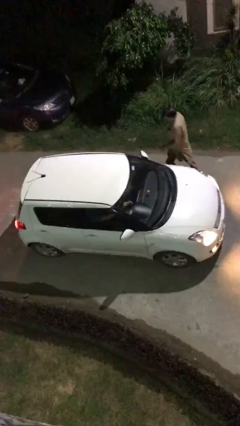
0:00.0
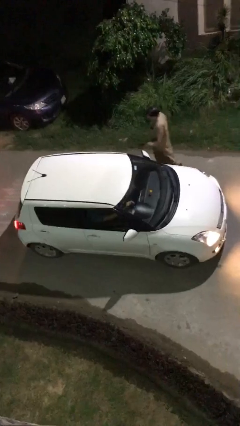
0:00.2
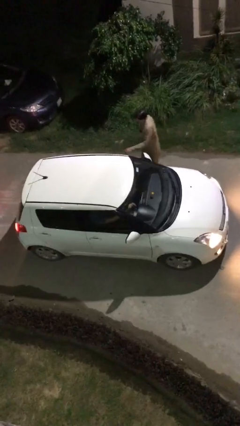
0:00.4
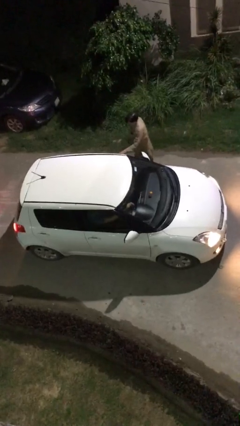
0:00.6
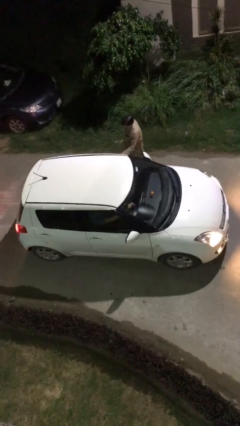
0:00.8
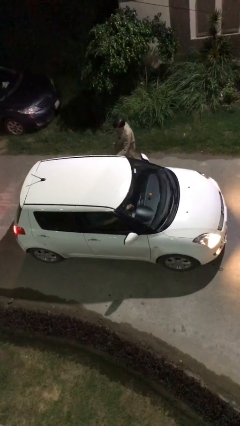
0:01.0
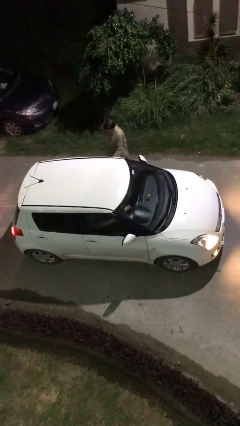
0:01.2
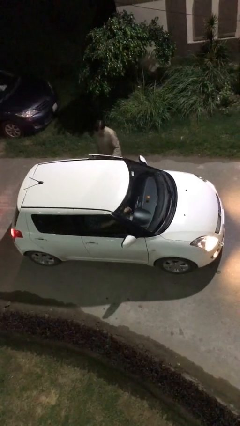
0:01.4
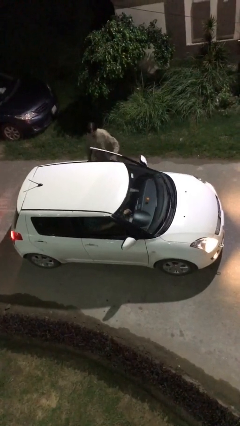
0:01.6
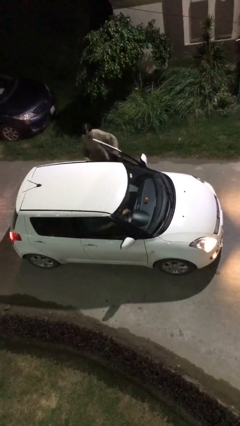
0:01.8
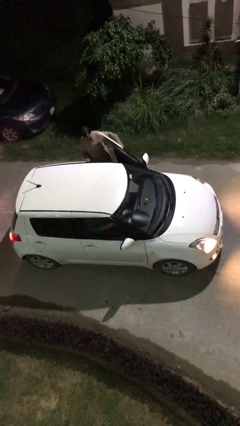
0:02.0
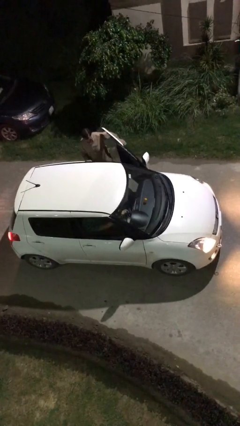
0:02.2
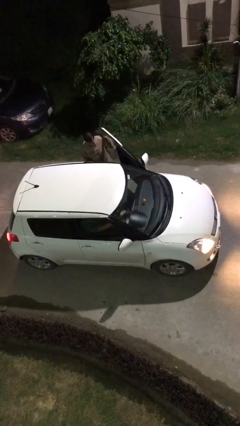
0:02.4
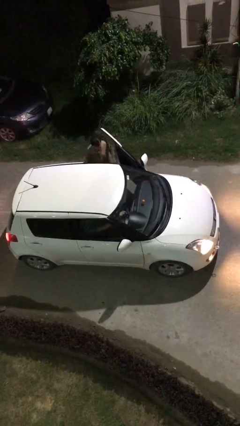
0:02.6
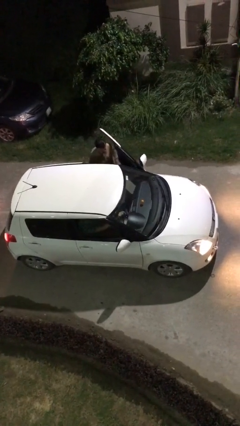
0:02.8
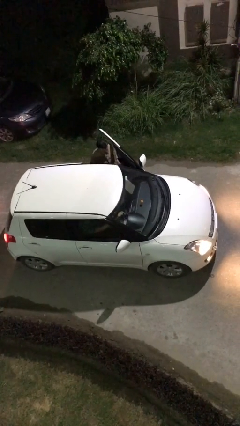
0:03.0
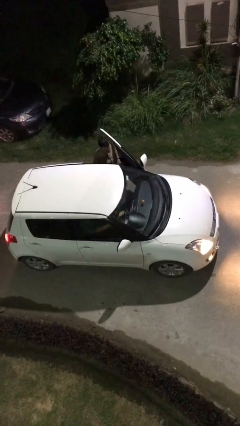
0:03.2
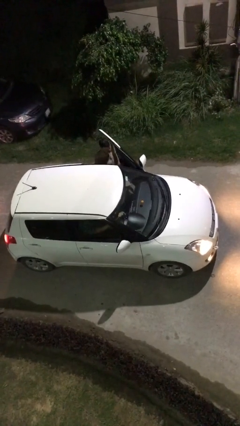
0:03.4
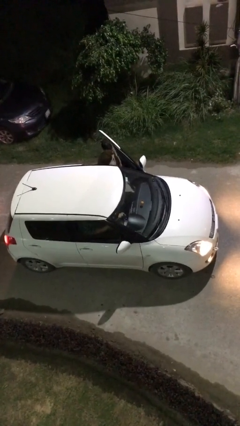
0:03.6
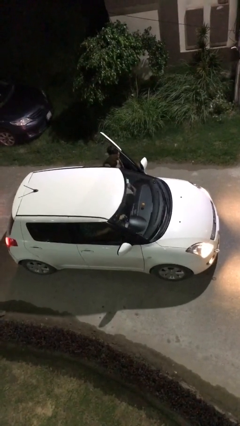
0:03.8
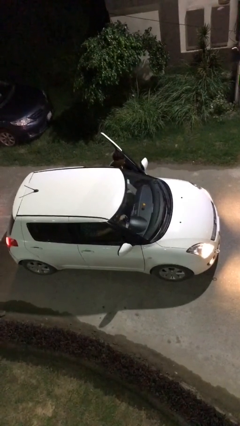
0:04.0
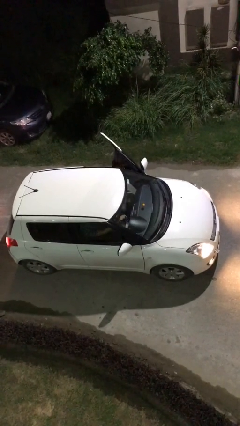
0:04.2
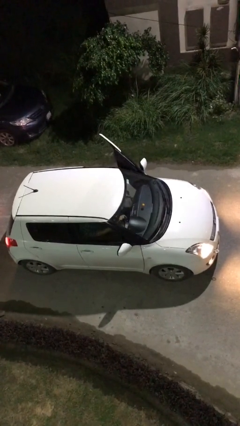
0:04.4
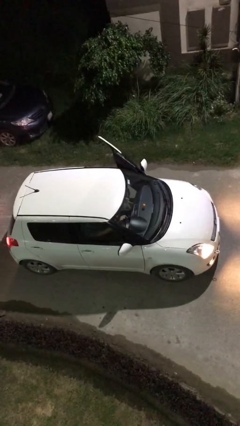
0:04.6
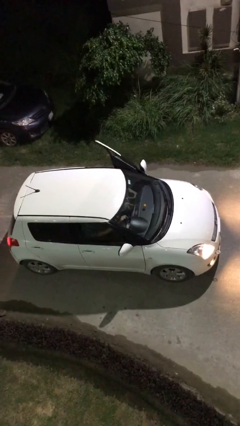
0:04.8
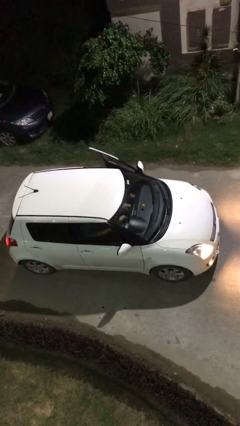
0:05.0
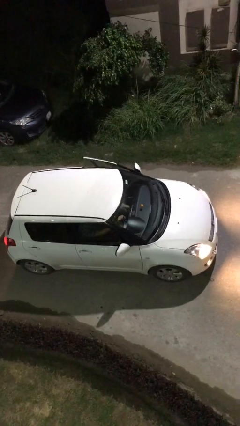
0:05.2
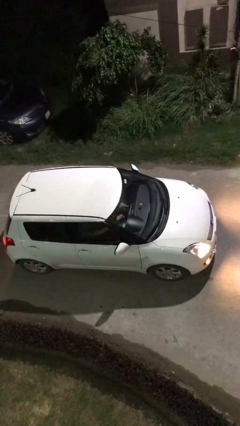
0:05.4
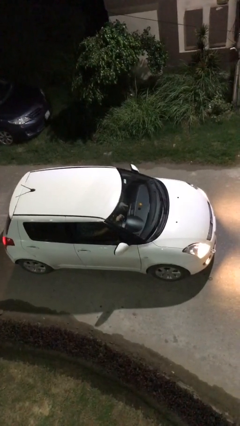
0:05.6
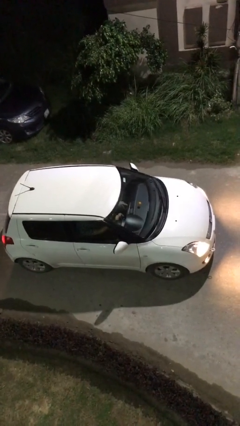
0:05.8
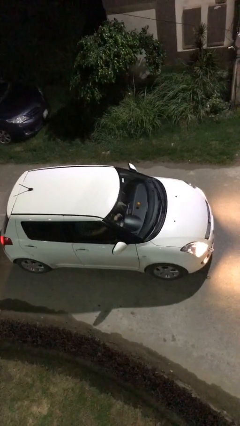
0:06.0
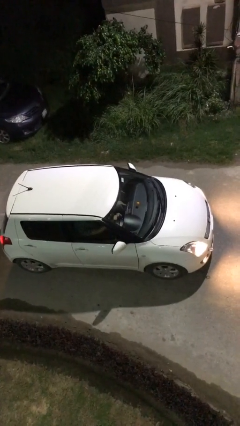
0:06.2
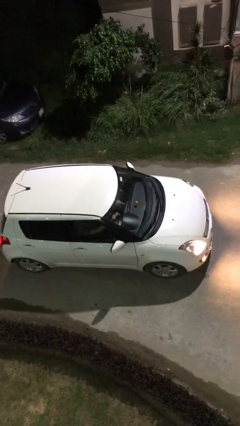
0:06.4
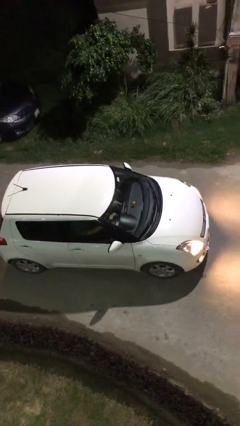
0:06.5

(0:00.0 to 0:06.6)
car picks up person

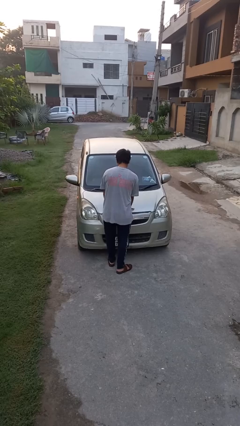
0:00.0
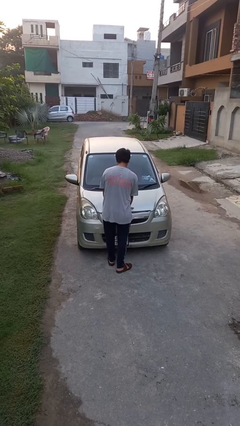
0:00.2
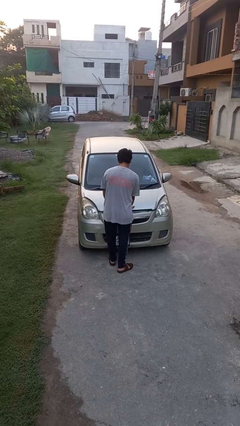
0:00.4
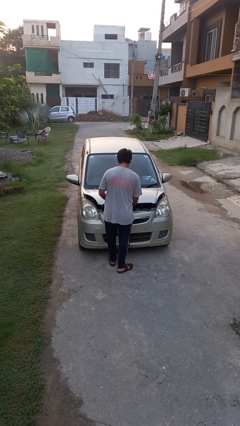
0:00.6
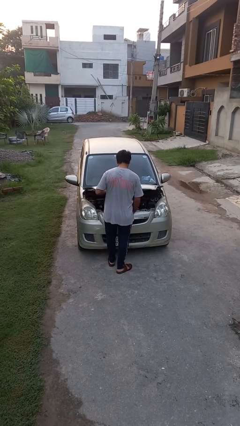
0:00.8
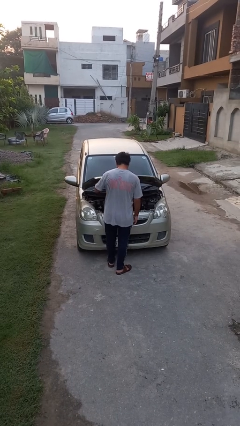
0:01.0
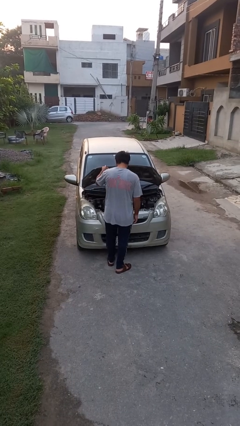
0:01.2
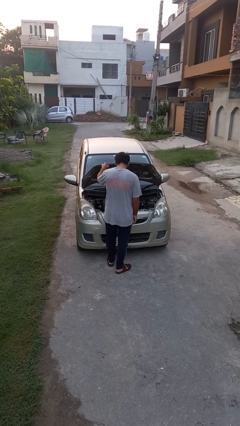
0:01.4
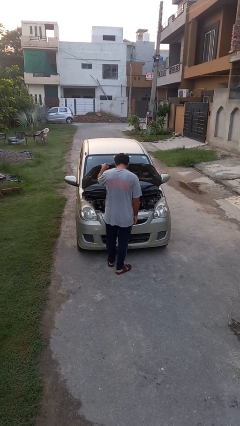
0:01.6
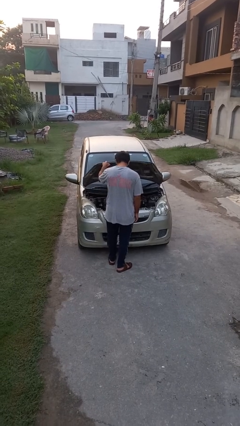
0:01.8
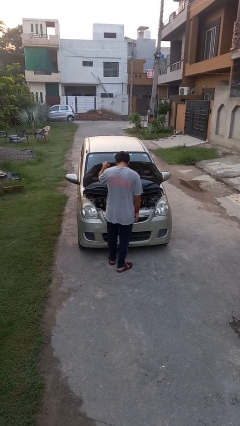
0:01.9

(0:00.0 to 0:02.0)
person opens car hood

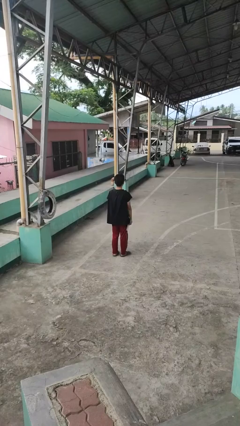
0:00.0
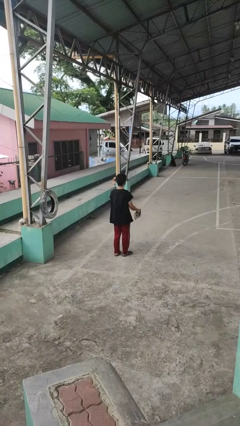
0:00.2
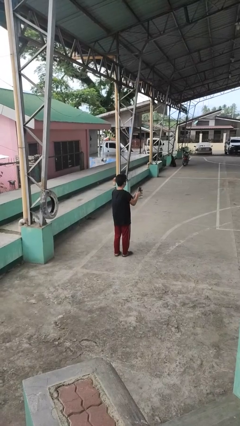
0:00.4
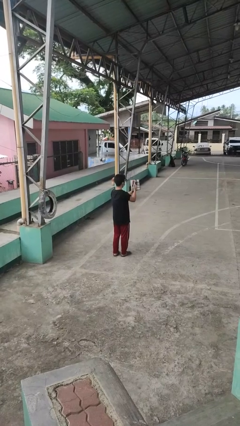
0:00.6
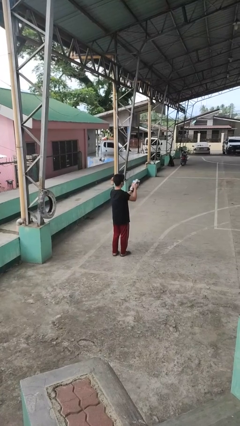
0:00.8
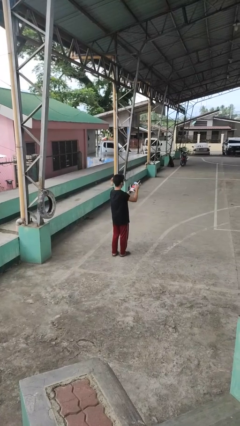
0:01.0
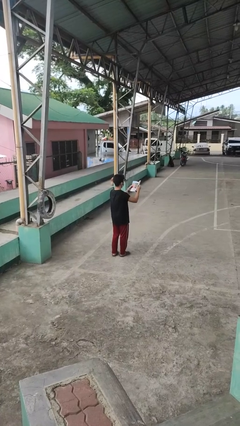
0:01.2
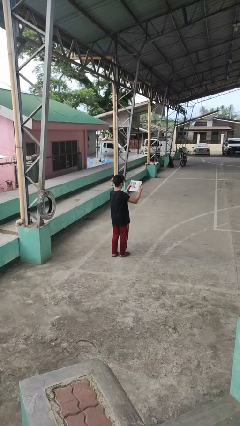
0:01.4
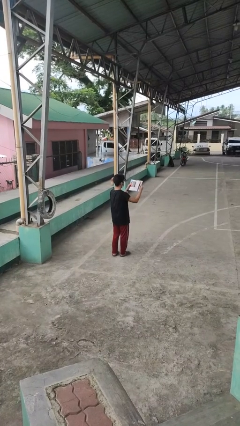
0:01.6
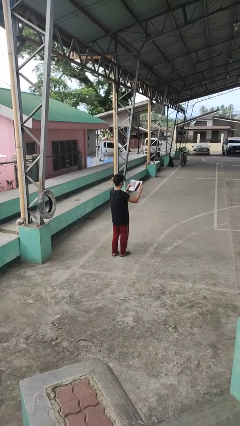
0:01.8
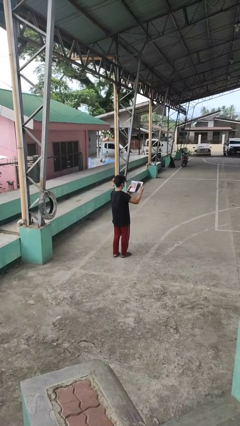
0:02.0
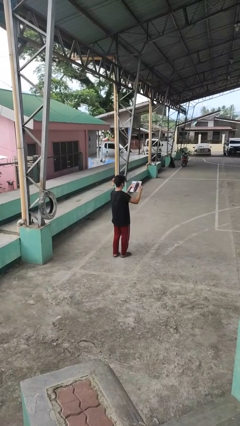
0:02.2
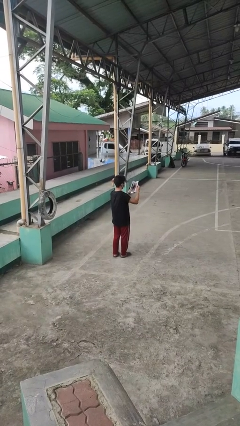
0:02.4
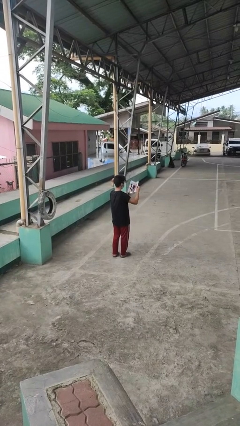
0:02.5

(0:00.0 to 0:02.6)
person reads magazine

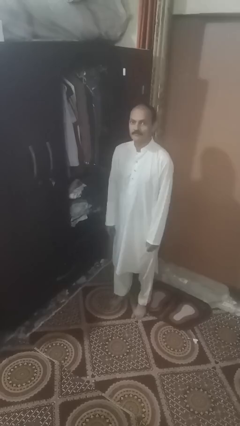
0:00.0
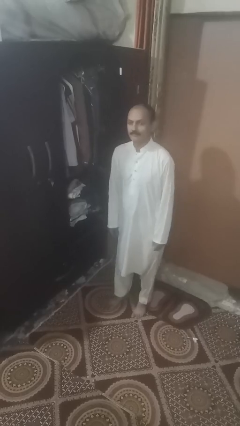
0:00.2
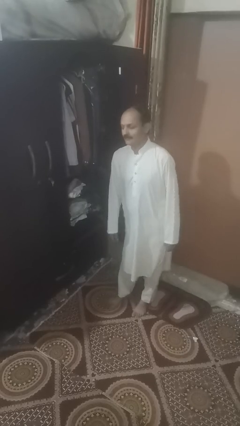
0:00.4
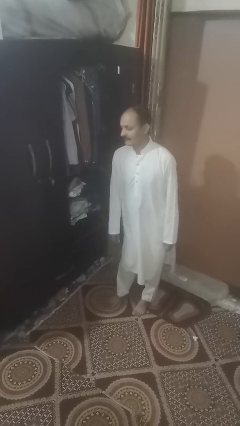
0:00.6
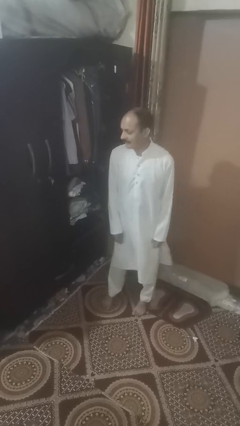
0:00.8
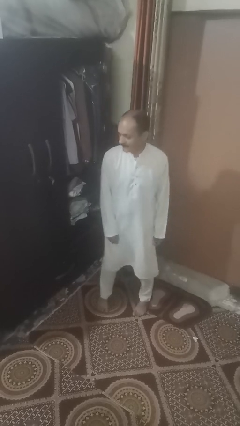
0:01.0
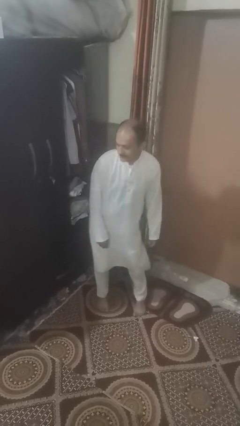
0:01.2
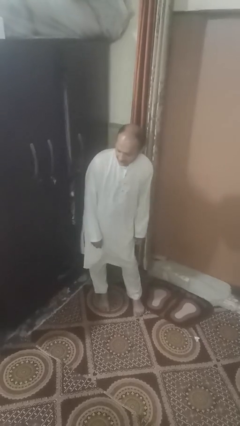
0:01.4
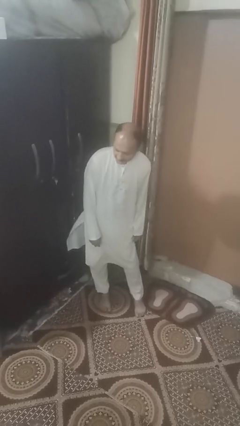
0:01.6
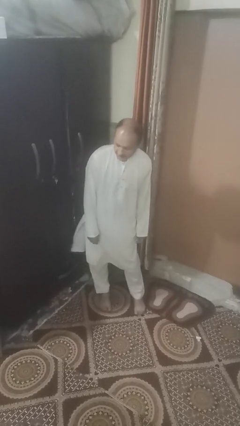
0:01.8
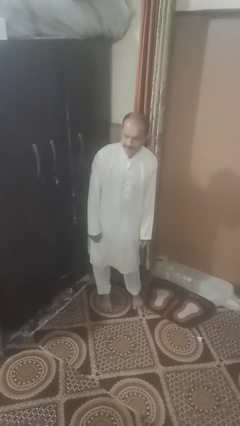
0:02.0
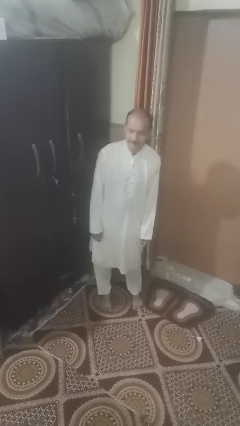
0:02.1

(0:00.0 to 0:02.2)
person closes door with hip

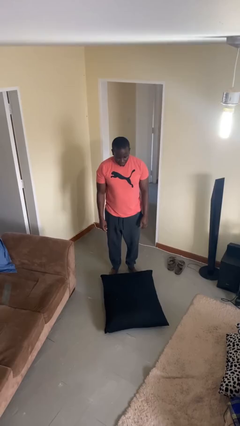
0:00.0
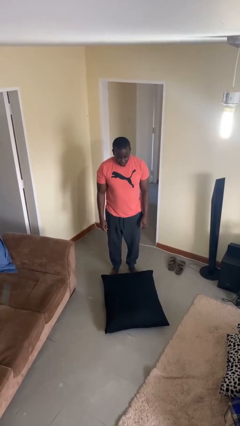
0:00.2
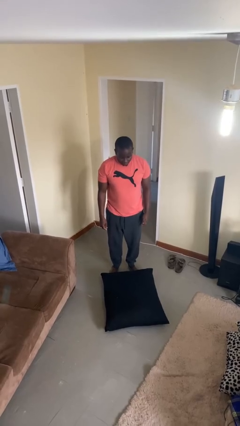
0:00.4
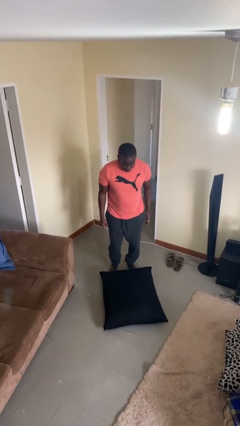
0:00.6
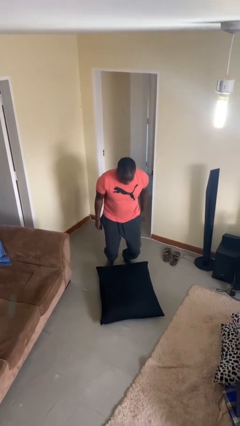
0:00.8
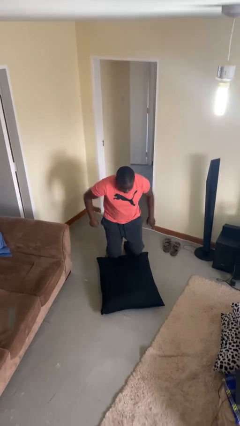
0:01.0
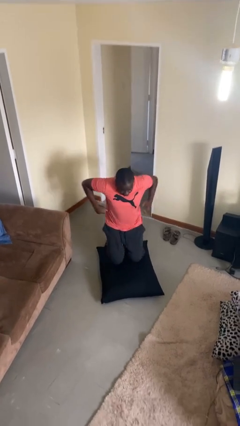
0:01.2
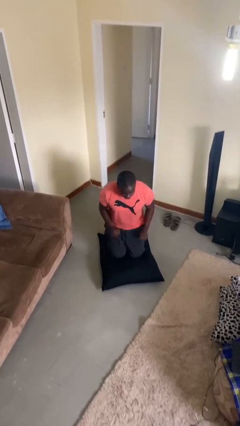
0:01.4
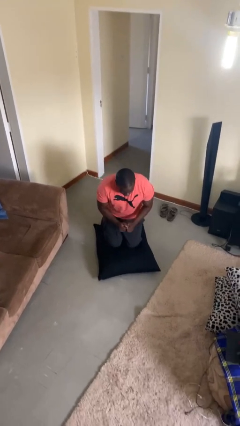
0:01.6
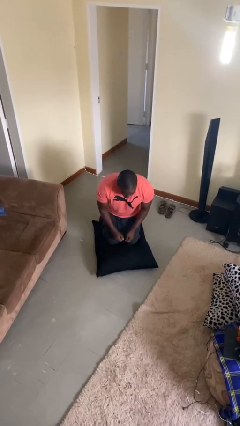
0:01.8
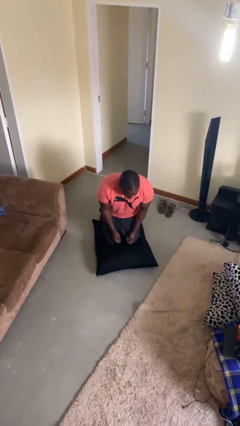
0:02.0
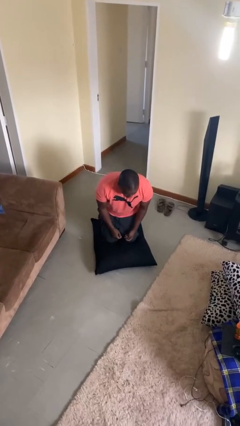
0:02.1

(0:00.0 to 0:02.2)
person trips on object on floor

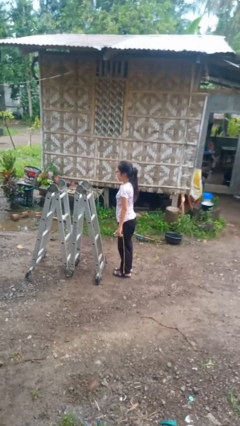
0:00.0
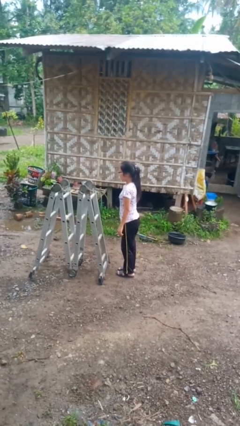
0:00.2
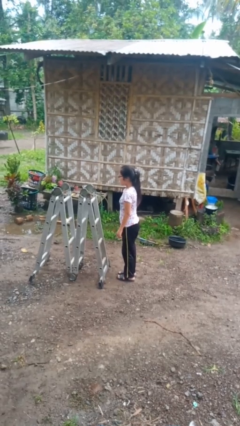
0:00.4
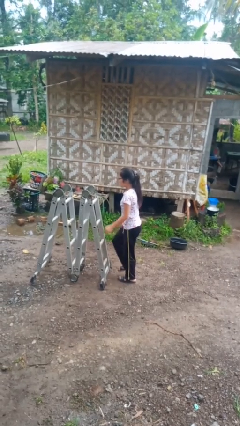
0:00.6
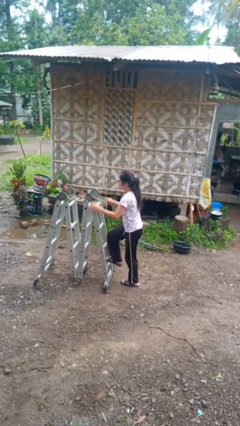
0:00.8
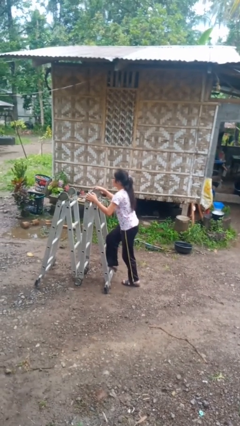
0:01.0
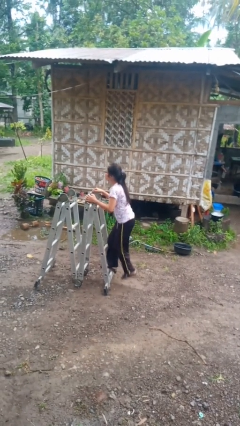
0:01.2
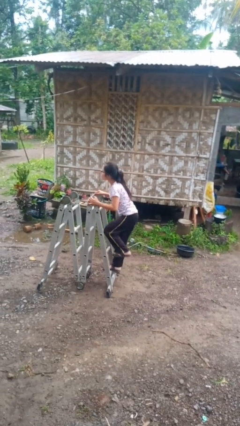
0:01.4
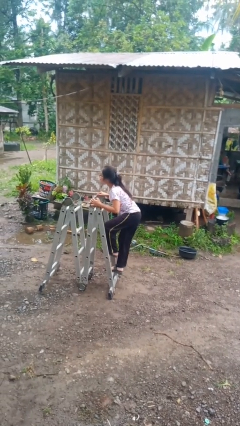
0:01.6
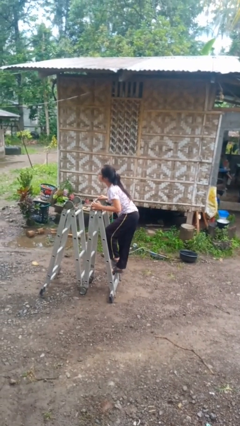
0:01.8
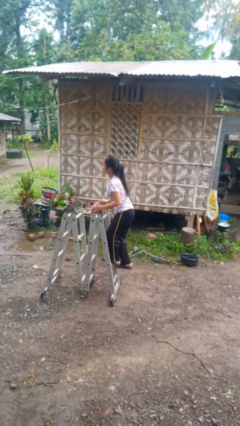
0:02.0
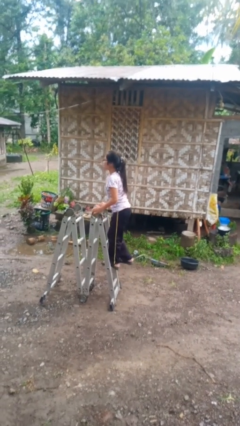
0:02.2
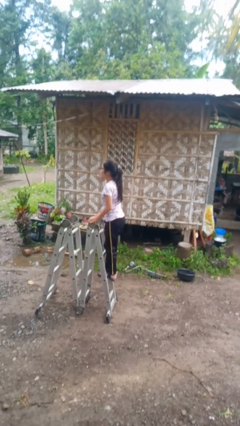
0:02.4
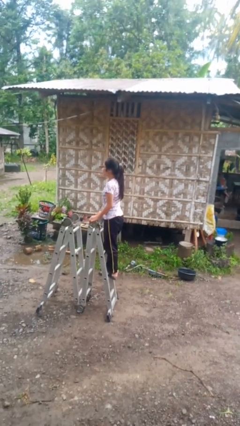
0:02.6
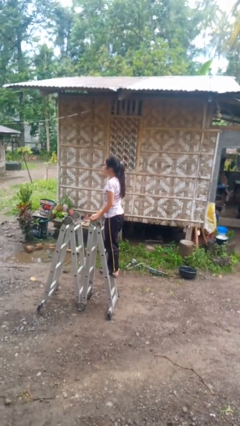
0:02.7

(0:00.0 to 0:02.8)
person climbs up ladder
